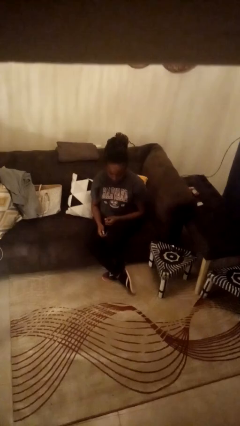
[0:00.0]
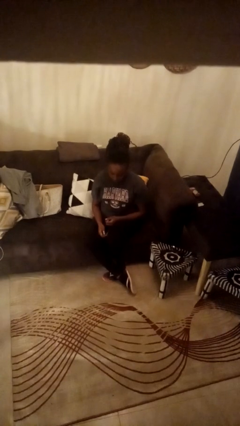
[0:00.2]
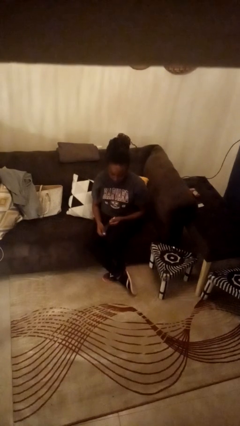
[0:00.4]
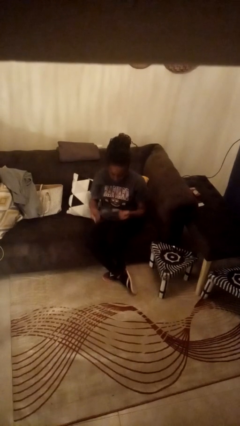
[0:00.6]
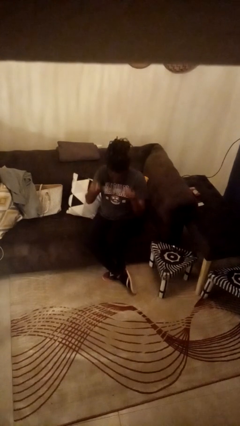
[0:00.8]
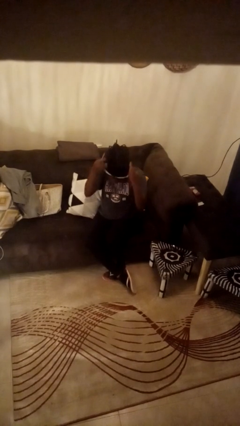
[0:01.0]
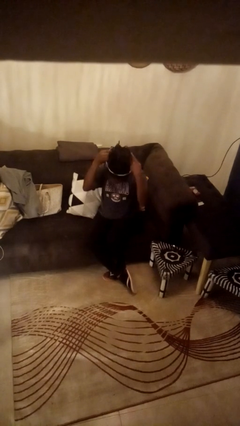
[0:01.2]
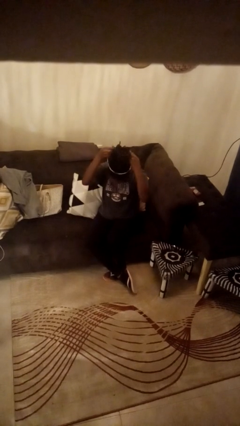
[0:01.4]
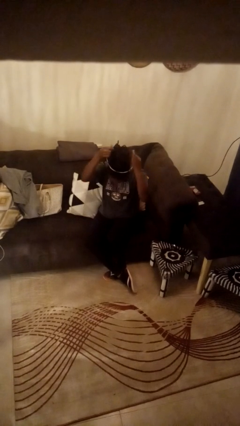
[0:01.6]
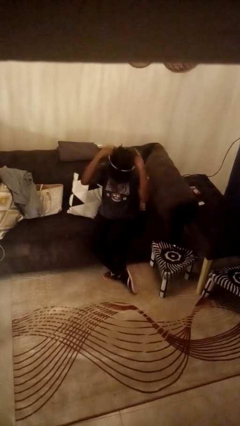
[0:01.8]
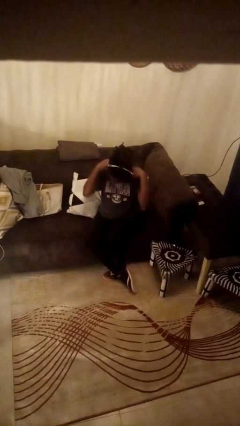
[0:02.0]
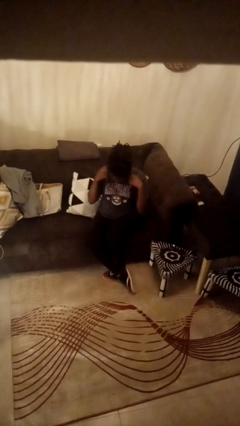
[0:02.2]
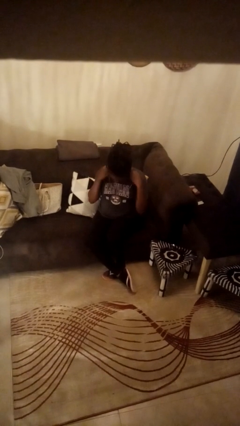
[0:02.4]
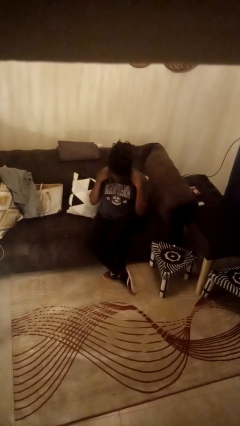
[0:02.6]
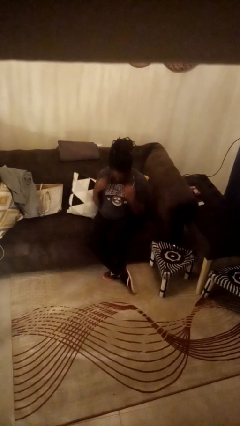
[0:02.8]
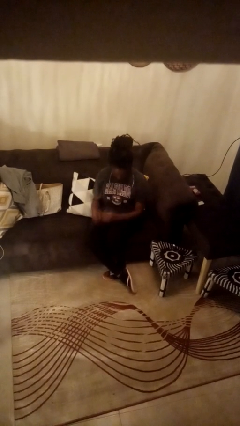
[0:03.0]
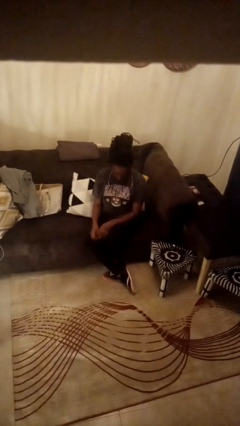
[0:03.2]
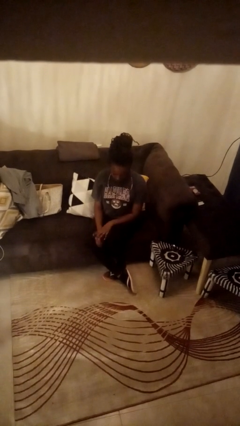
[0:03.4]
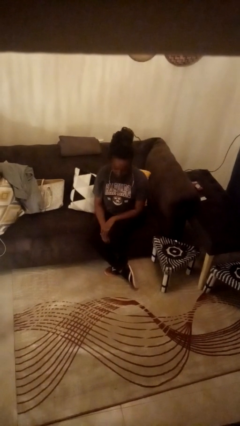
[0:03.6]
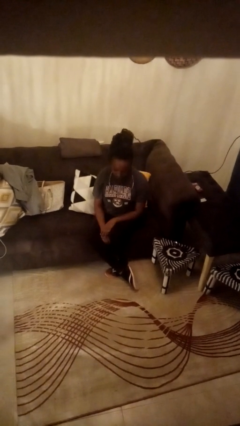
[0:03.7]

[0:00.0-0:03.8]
person puts on necklace

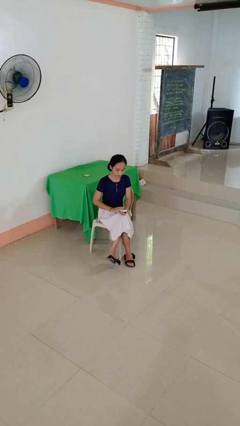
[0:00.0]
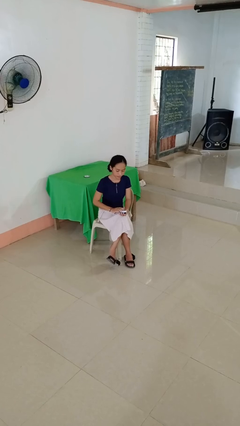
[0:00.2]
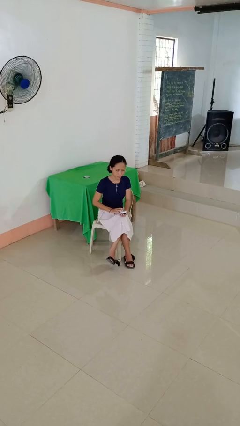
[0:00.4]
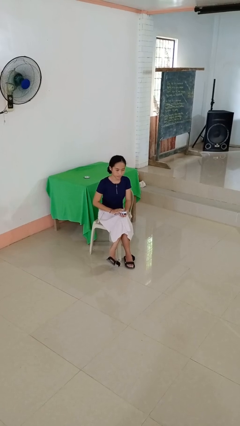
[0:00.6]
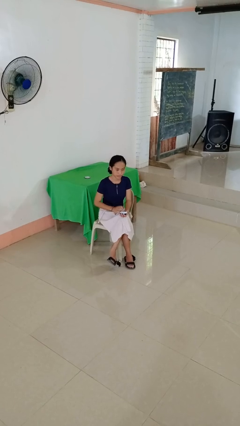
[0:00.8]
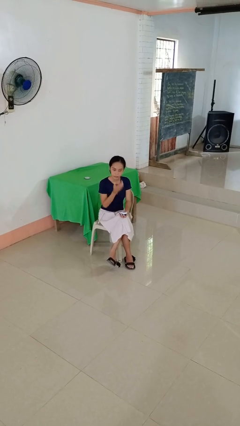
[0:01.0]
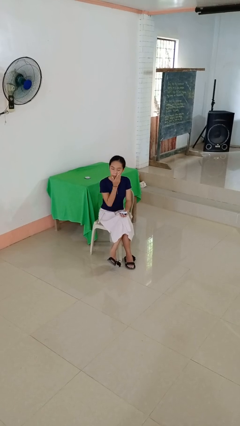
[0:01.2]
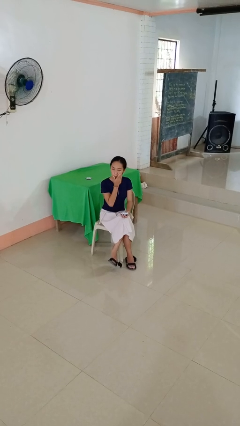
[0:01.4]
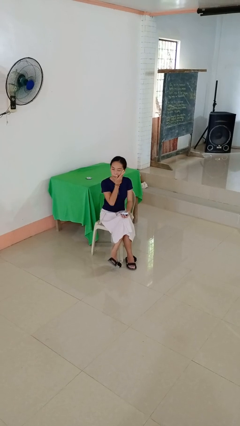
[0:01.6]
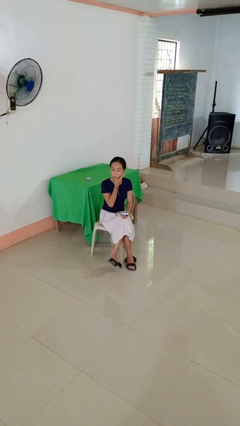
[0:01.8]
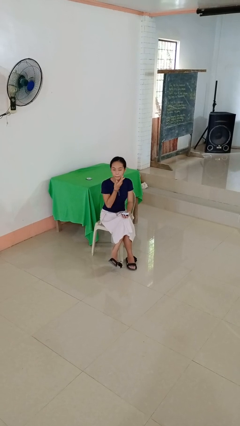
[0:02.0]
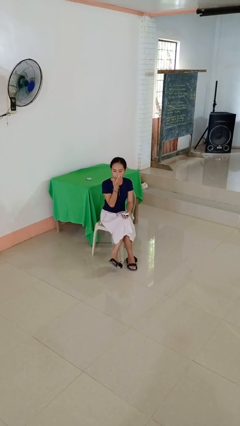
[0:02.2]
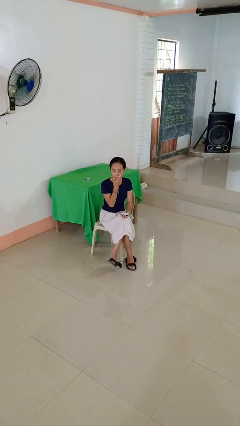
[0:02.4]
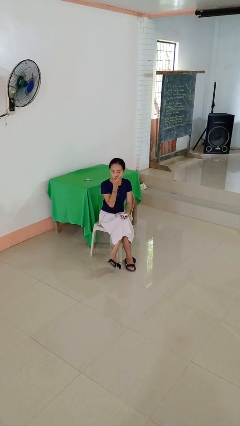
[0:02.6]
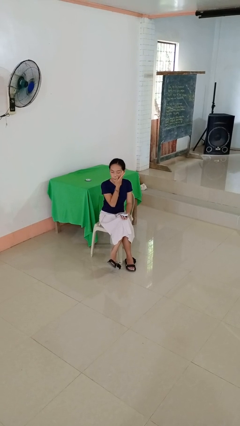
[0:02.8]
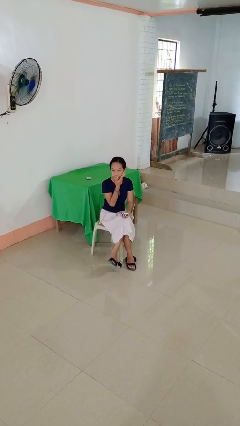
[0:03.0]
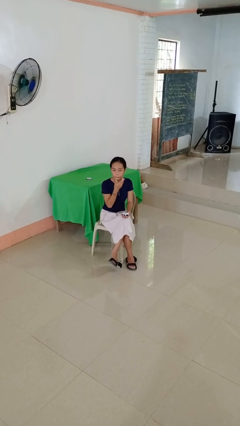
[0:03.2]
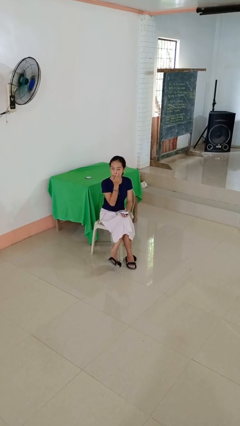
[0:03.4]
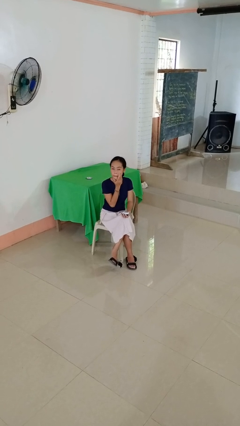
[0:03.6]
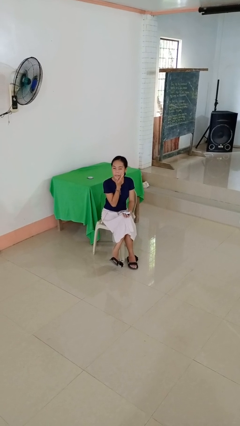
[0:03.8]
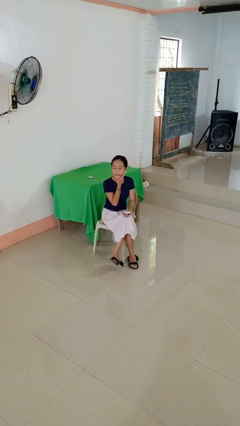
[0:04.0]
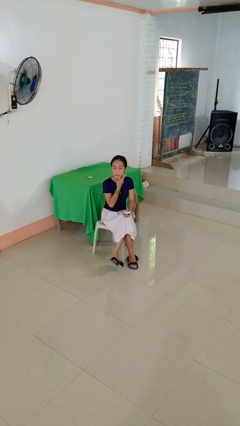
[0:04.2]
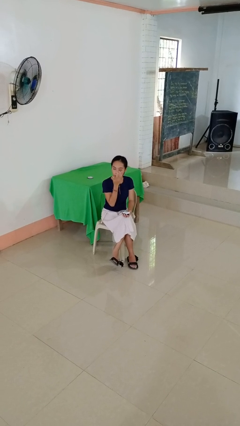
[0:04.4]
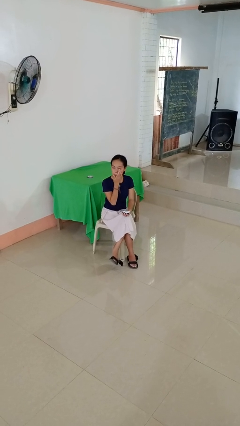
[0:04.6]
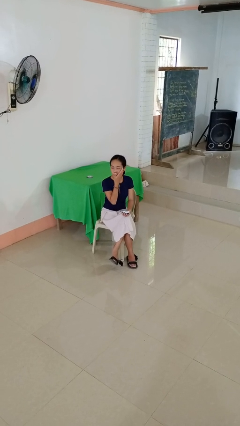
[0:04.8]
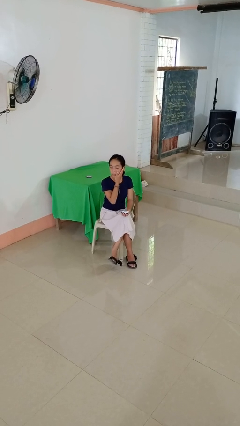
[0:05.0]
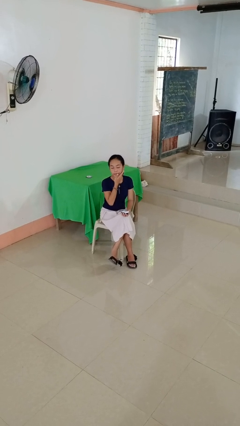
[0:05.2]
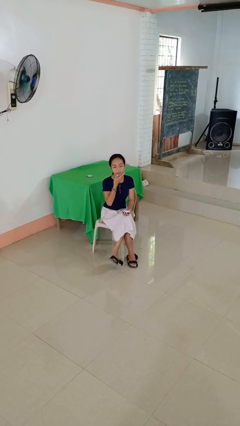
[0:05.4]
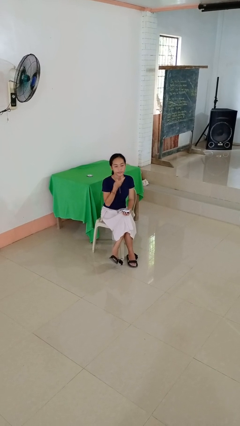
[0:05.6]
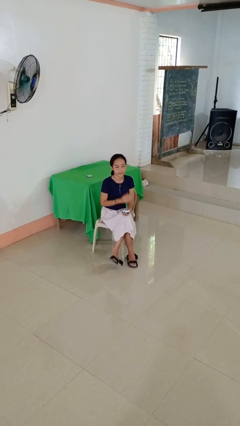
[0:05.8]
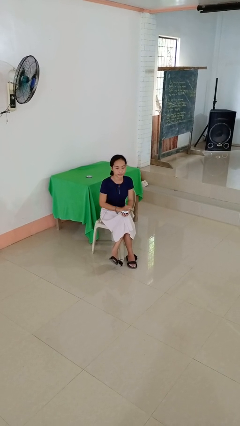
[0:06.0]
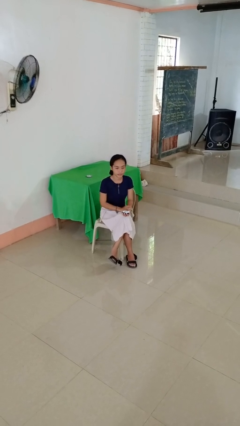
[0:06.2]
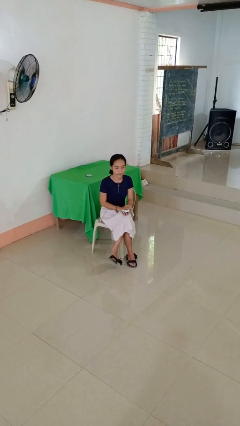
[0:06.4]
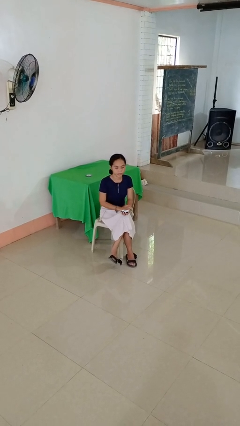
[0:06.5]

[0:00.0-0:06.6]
person applies facial moisturizer

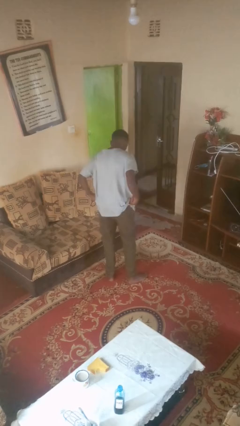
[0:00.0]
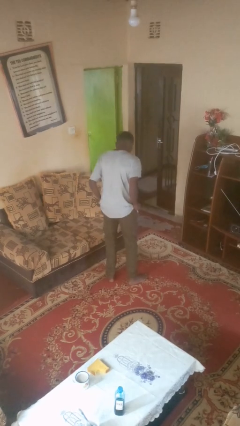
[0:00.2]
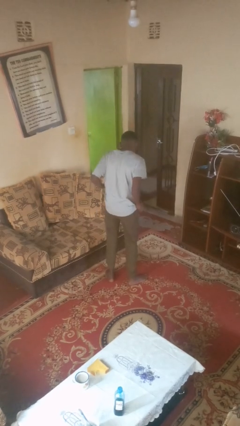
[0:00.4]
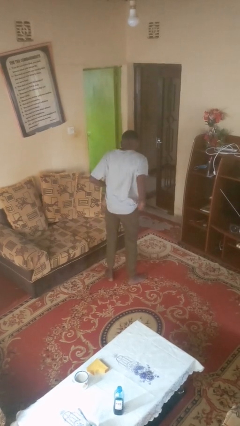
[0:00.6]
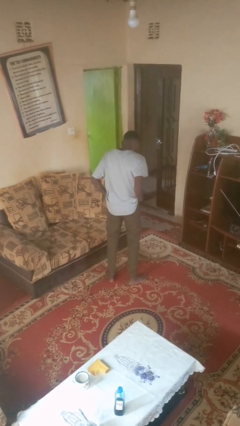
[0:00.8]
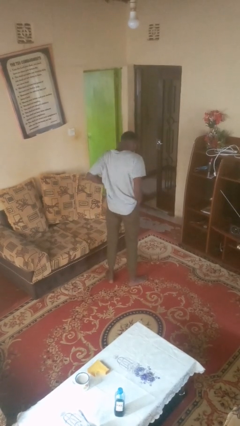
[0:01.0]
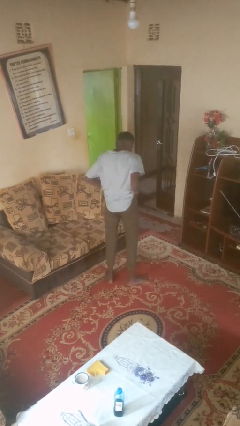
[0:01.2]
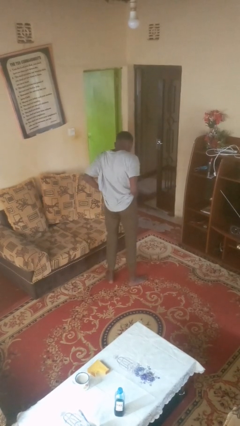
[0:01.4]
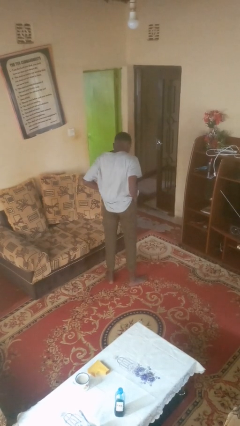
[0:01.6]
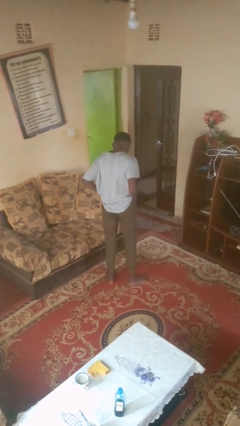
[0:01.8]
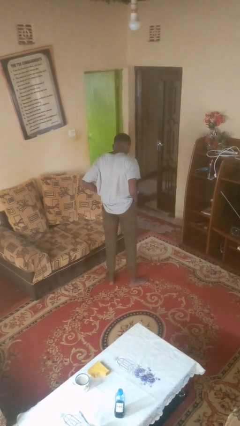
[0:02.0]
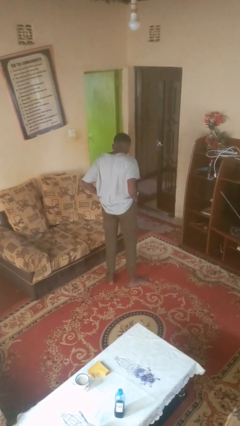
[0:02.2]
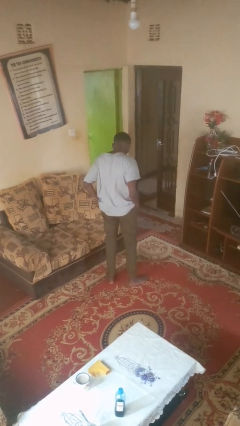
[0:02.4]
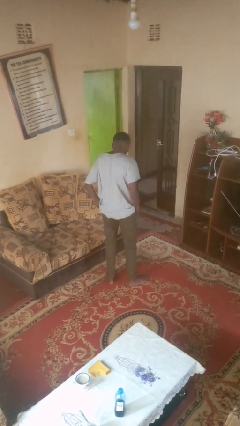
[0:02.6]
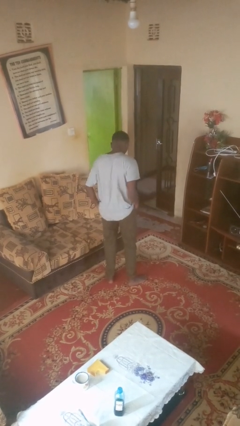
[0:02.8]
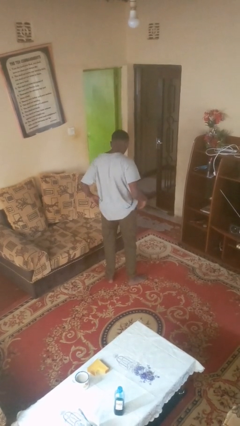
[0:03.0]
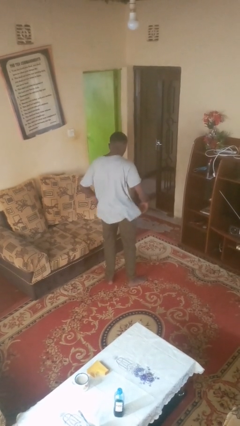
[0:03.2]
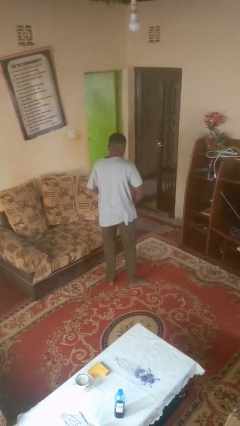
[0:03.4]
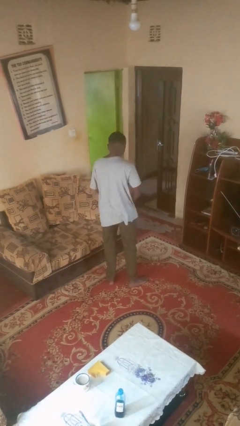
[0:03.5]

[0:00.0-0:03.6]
person washes dish

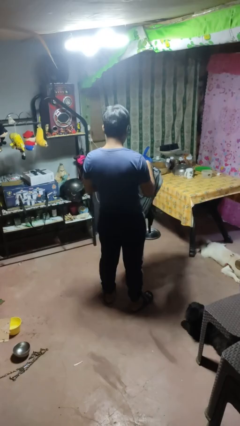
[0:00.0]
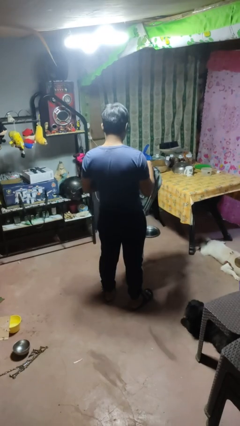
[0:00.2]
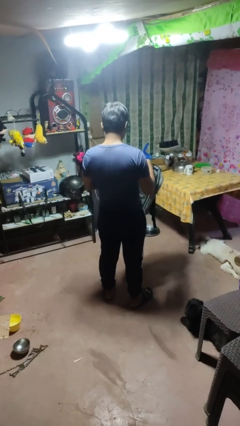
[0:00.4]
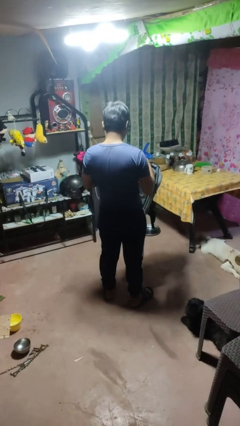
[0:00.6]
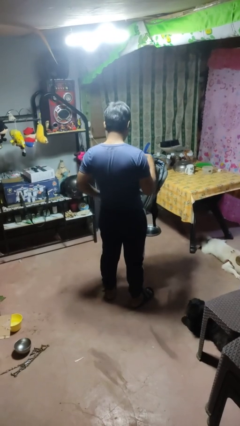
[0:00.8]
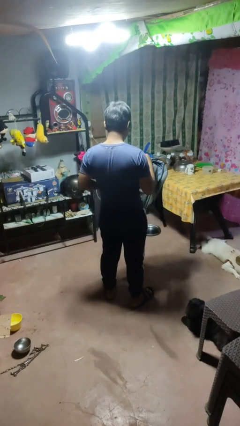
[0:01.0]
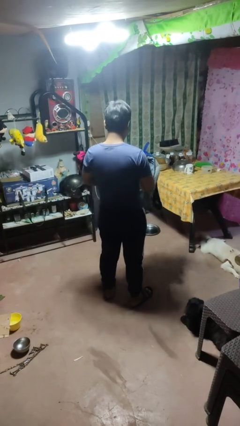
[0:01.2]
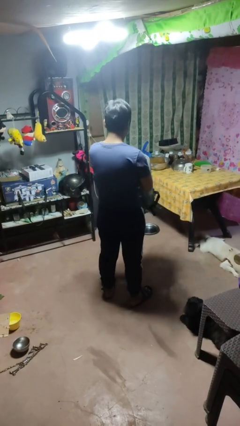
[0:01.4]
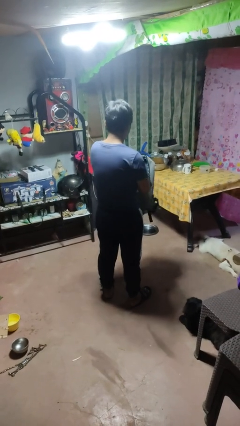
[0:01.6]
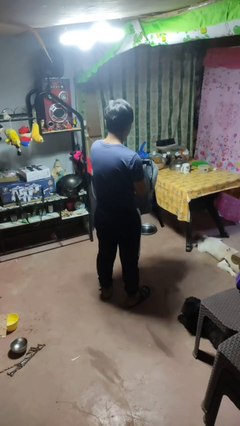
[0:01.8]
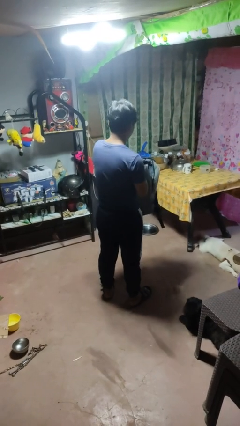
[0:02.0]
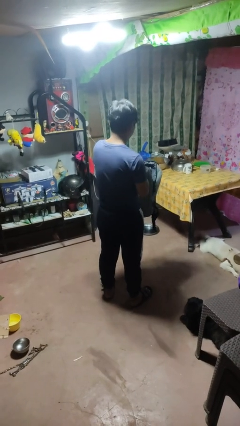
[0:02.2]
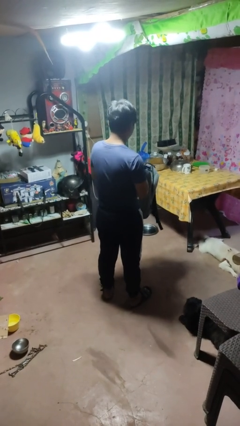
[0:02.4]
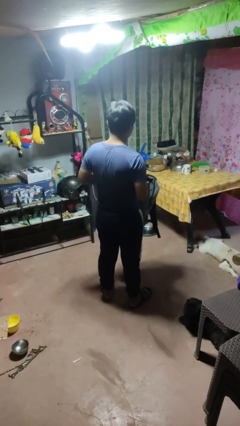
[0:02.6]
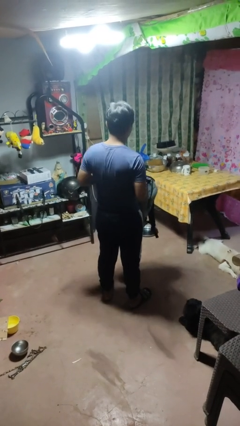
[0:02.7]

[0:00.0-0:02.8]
person searches in bag

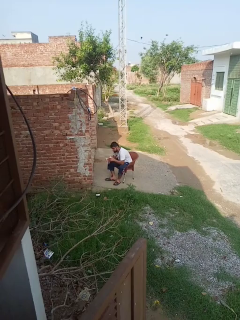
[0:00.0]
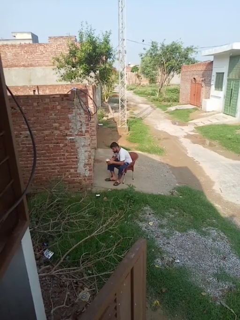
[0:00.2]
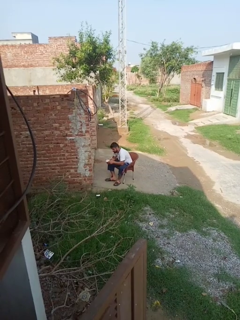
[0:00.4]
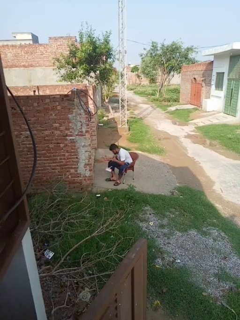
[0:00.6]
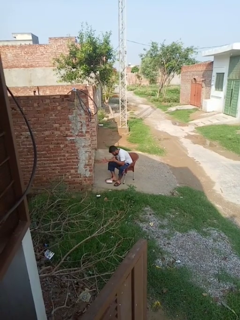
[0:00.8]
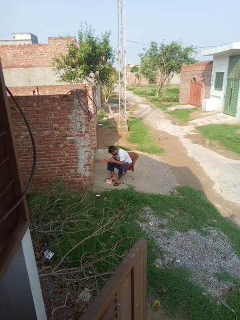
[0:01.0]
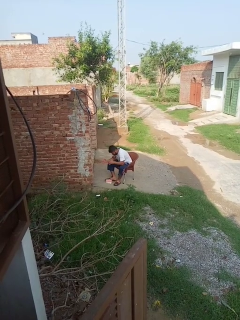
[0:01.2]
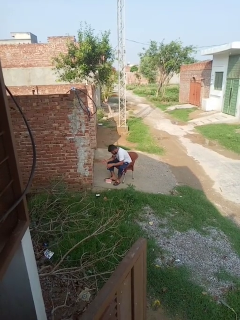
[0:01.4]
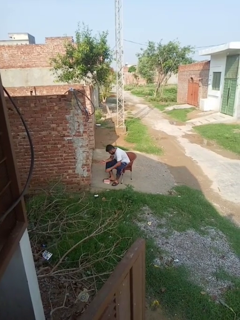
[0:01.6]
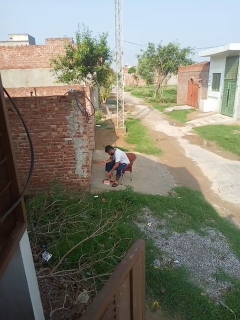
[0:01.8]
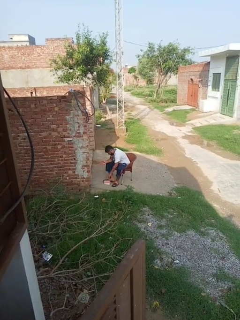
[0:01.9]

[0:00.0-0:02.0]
person drops object
